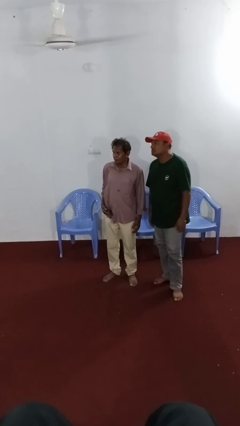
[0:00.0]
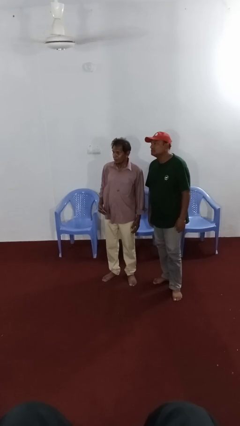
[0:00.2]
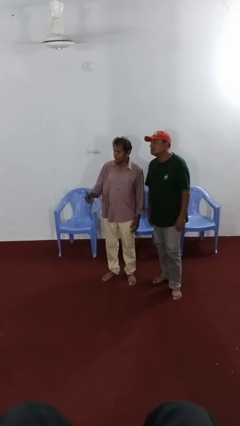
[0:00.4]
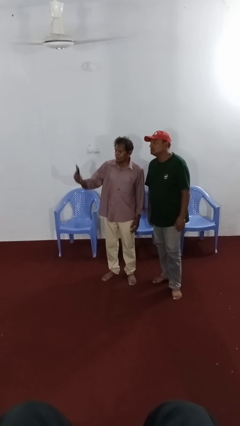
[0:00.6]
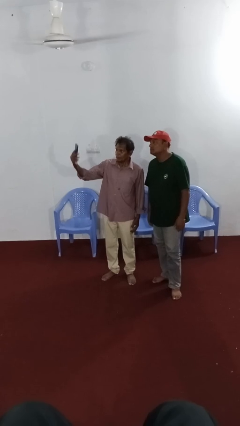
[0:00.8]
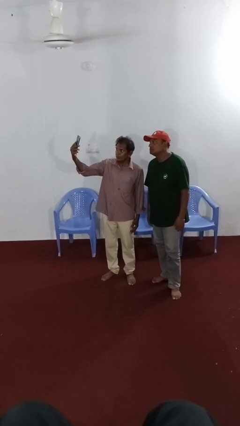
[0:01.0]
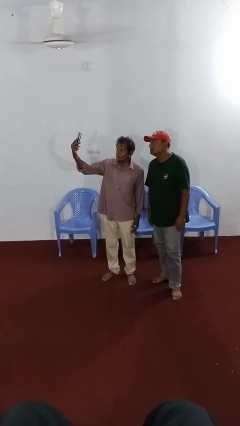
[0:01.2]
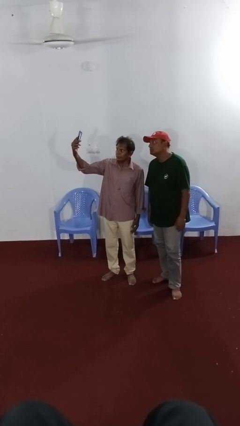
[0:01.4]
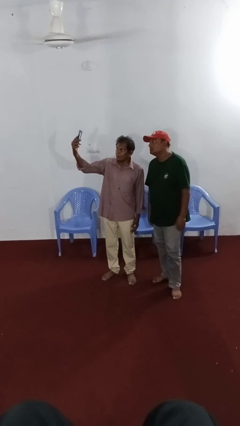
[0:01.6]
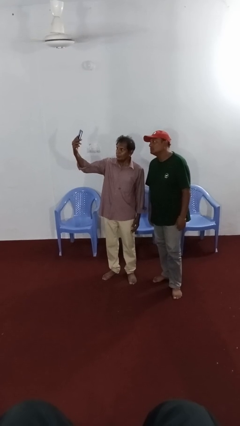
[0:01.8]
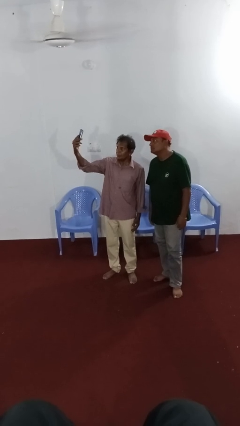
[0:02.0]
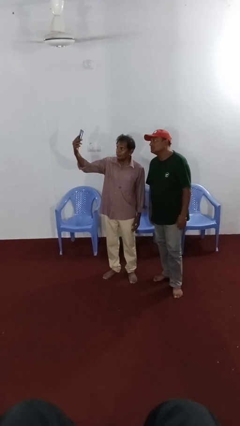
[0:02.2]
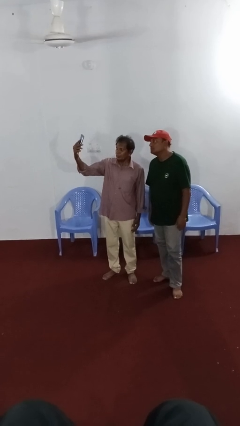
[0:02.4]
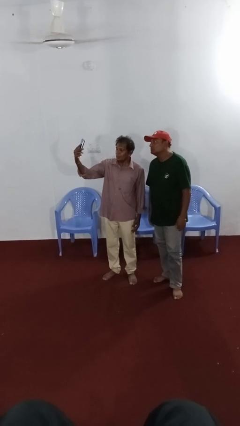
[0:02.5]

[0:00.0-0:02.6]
person takes selfie with person

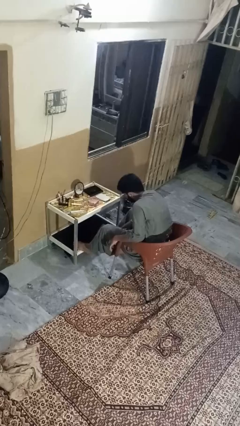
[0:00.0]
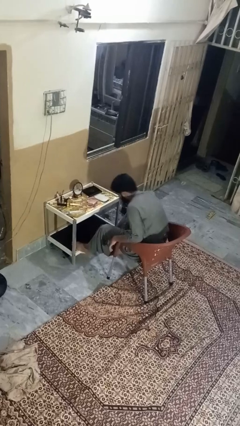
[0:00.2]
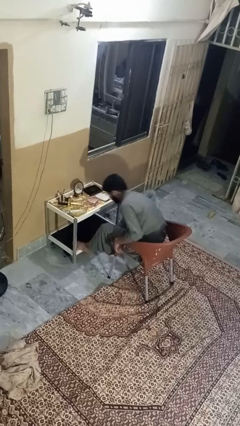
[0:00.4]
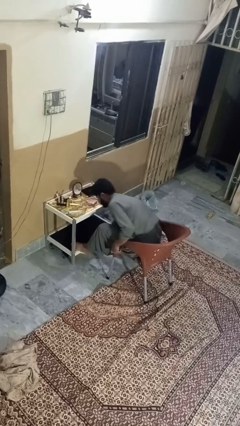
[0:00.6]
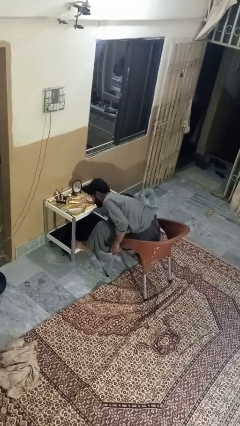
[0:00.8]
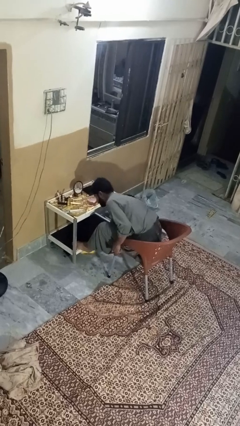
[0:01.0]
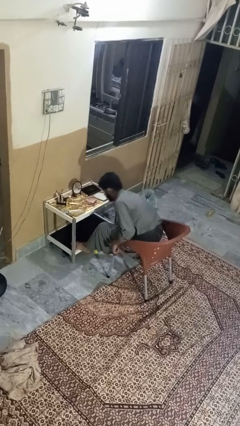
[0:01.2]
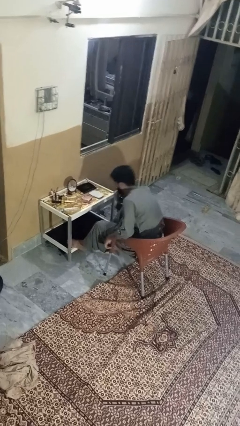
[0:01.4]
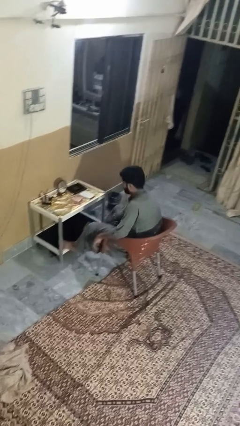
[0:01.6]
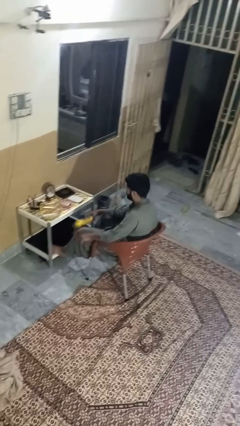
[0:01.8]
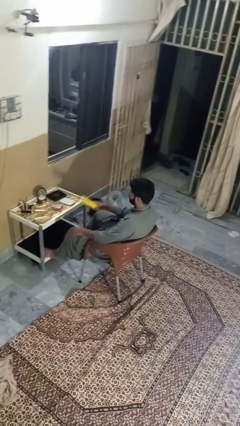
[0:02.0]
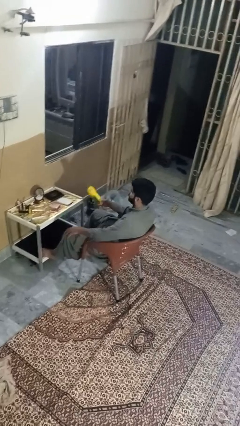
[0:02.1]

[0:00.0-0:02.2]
person picks up object from floor

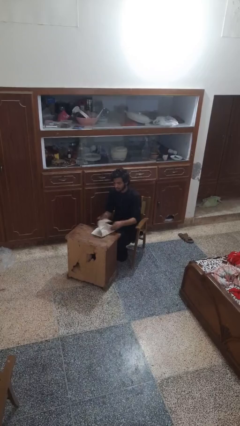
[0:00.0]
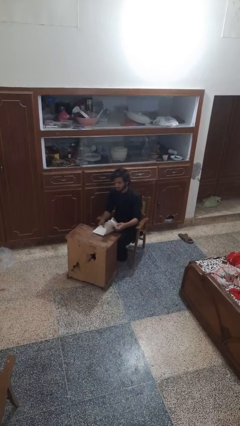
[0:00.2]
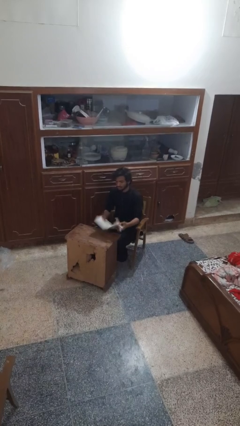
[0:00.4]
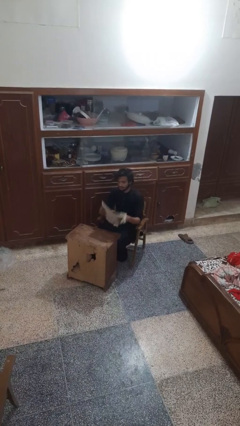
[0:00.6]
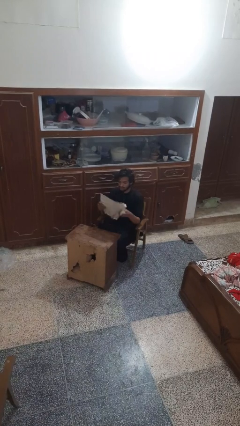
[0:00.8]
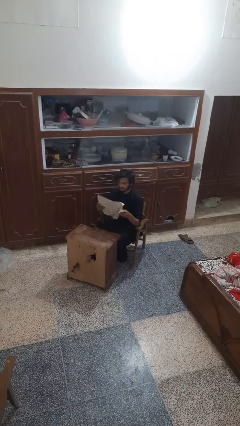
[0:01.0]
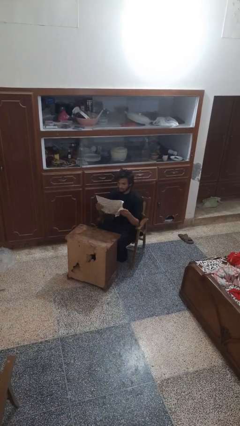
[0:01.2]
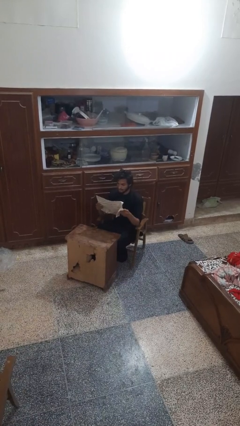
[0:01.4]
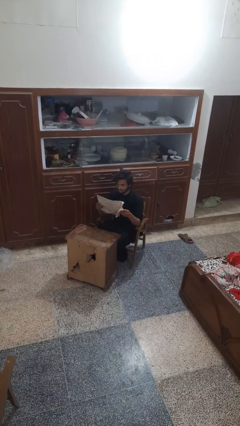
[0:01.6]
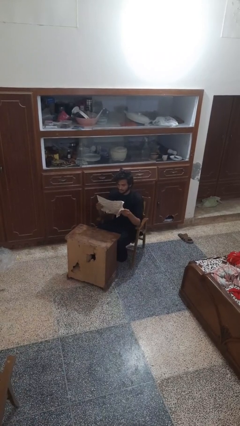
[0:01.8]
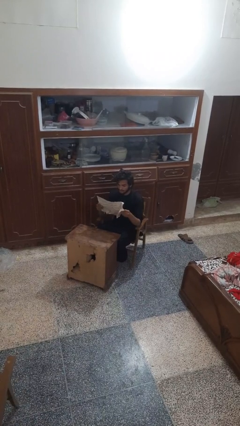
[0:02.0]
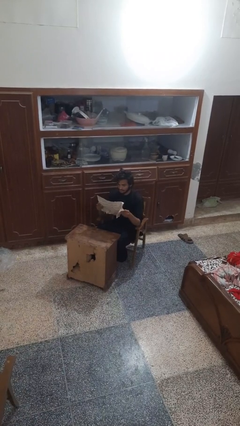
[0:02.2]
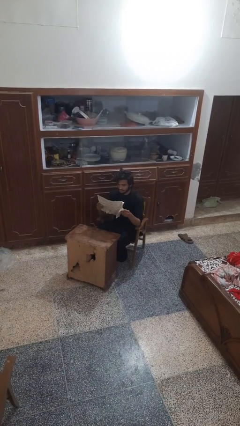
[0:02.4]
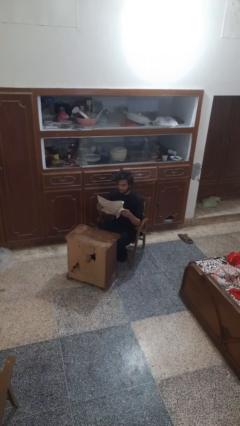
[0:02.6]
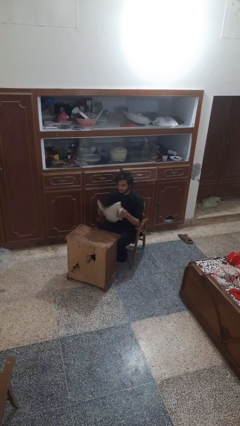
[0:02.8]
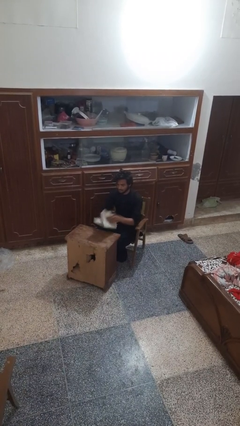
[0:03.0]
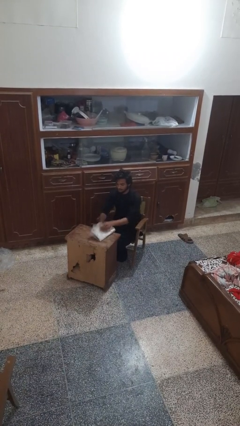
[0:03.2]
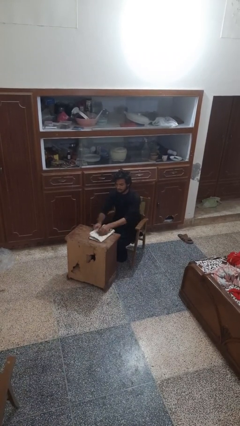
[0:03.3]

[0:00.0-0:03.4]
person reads newspaper

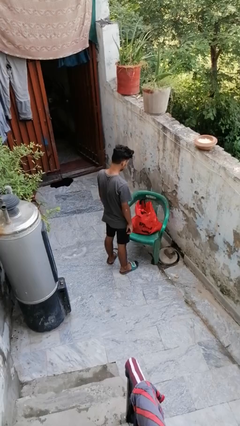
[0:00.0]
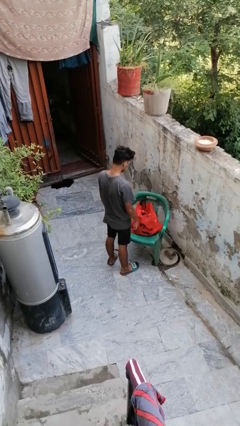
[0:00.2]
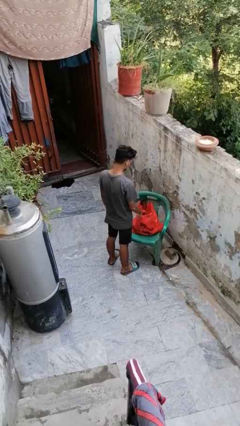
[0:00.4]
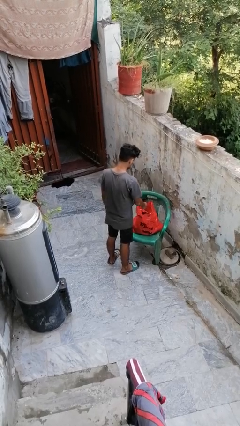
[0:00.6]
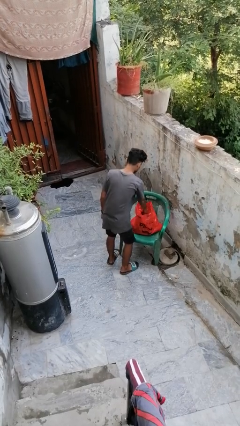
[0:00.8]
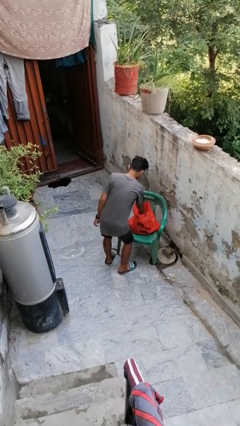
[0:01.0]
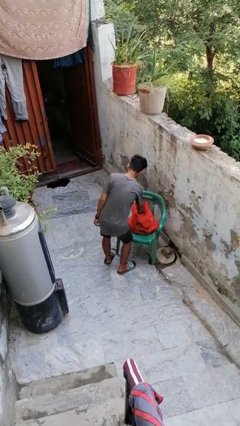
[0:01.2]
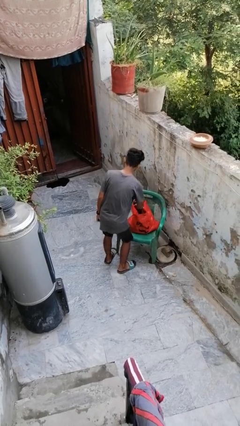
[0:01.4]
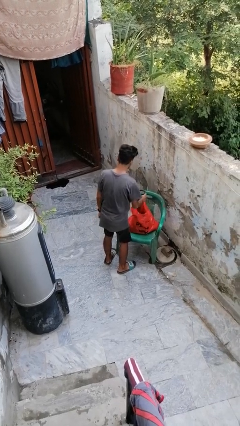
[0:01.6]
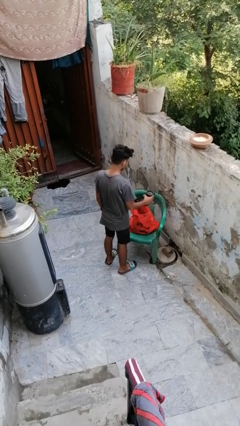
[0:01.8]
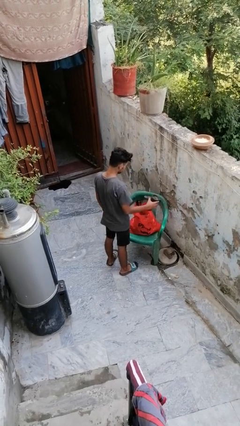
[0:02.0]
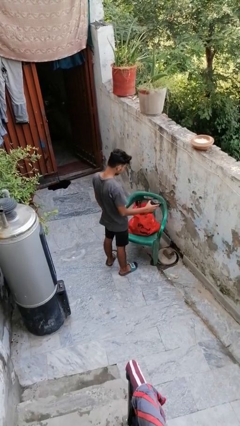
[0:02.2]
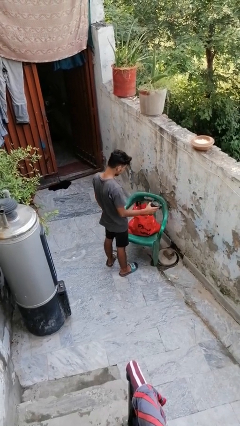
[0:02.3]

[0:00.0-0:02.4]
person takes object from bag

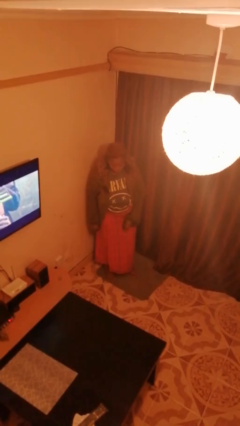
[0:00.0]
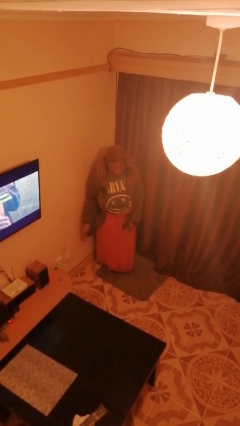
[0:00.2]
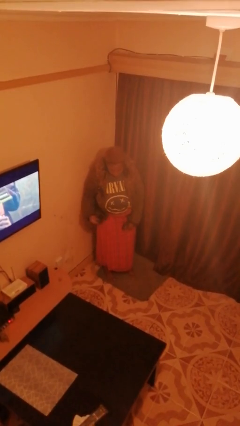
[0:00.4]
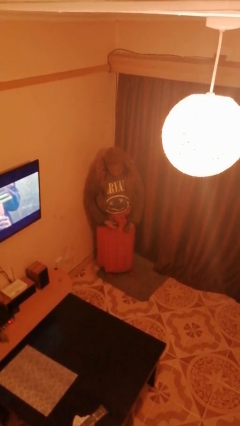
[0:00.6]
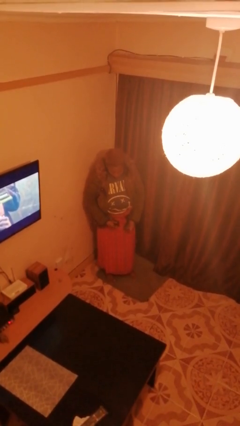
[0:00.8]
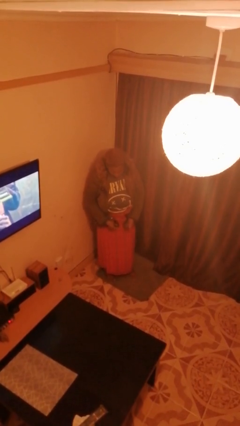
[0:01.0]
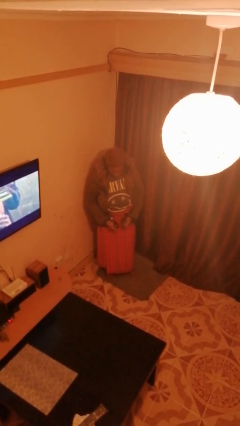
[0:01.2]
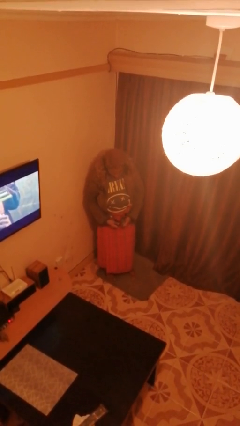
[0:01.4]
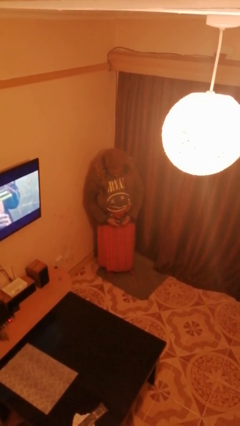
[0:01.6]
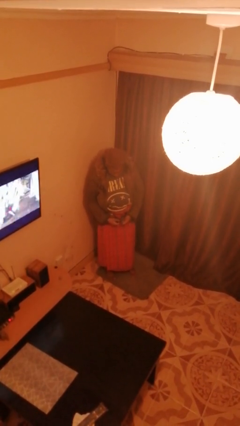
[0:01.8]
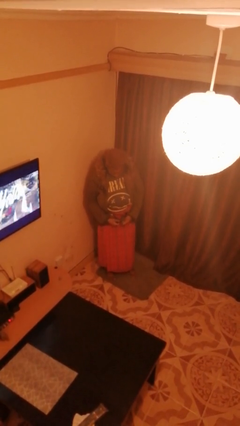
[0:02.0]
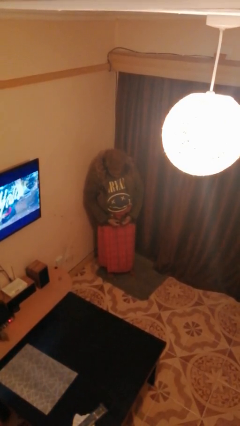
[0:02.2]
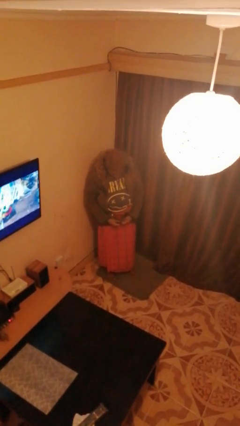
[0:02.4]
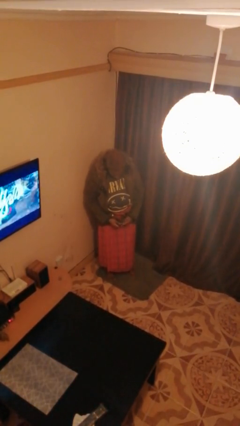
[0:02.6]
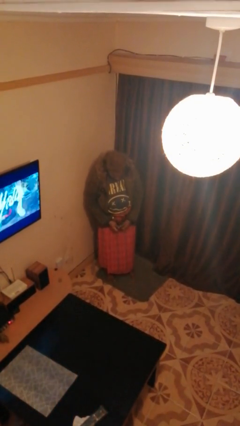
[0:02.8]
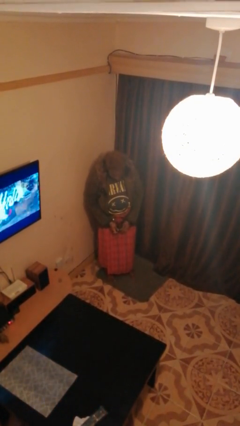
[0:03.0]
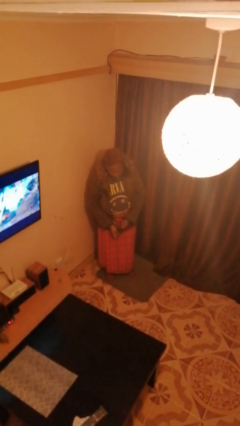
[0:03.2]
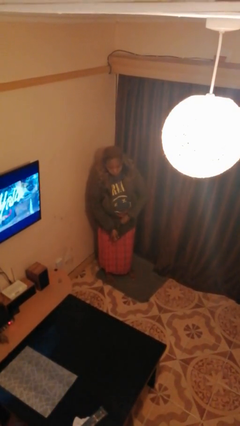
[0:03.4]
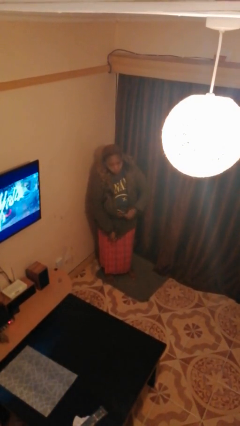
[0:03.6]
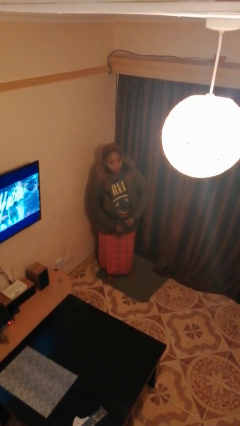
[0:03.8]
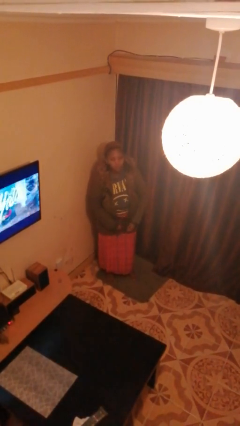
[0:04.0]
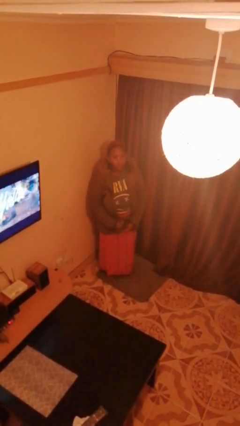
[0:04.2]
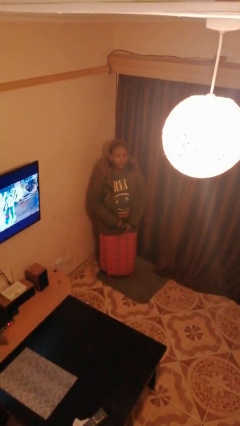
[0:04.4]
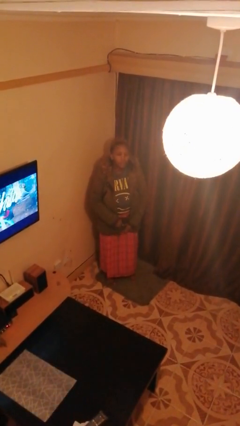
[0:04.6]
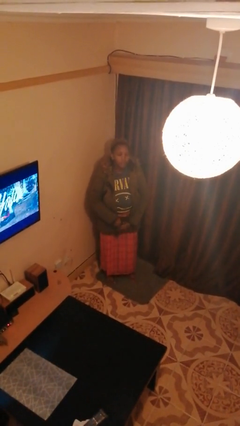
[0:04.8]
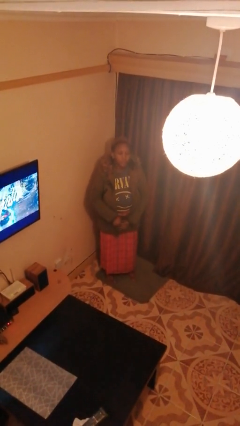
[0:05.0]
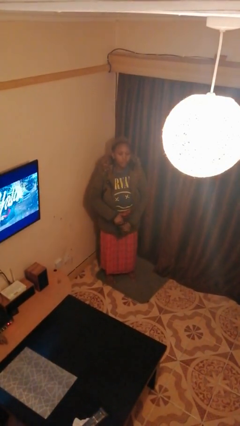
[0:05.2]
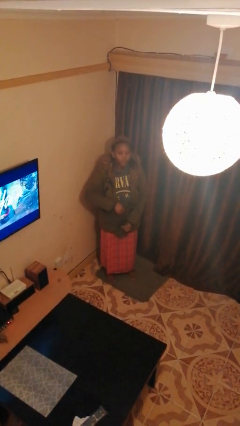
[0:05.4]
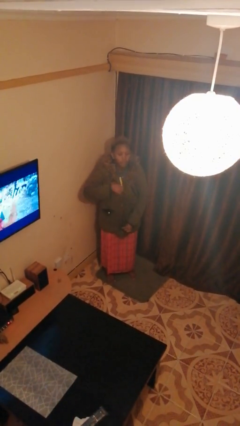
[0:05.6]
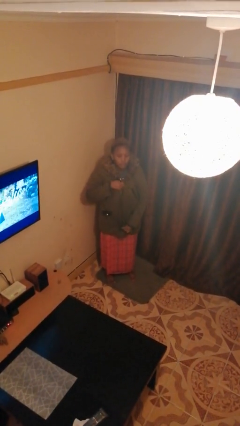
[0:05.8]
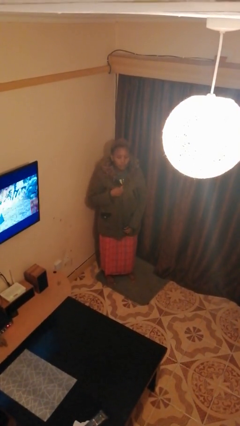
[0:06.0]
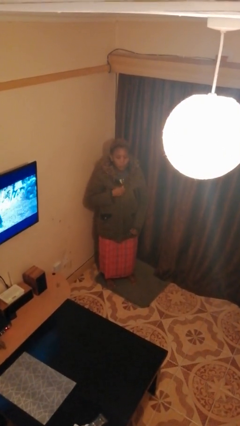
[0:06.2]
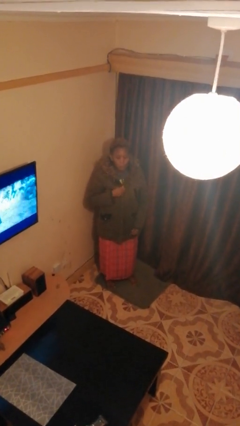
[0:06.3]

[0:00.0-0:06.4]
person zips up jacket

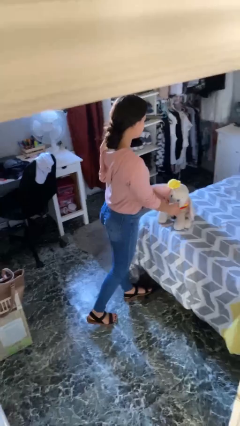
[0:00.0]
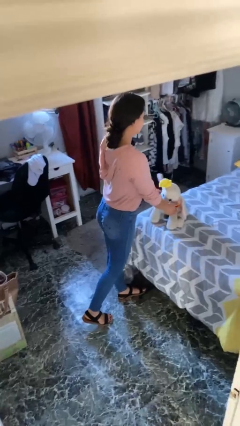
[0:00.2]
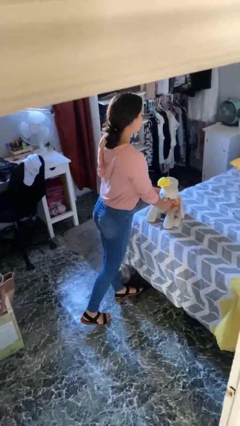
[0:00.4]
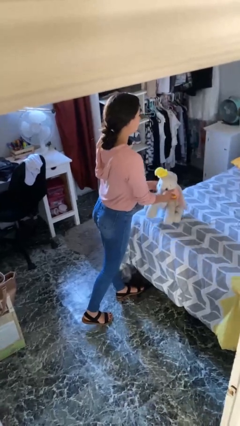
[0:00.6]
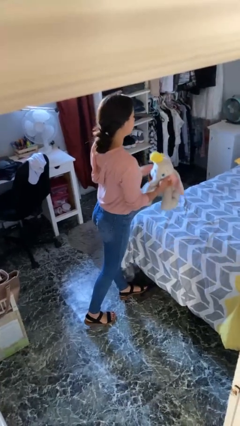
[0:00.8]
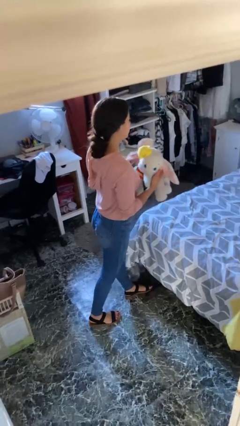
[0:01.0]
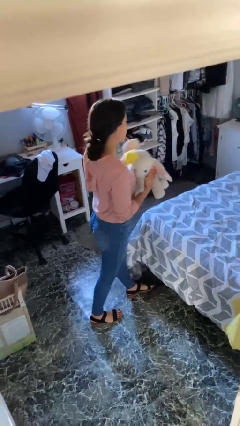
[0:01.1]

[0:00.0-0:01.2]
person picks up object from bed
